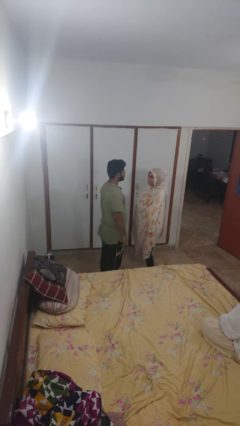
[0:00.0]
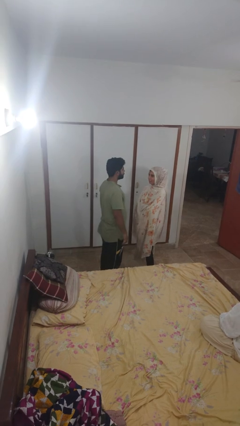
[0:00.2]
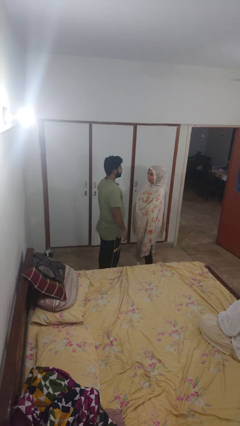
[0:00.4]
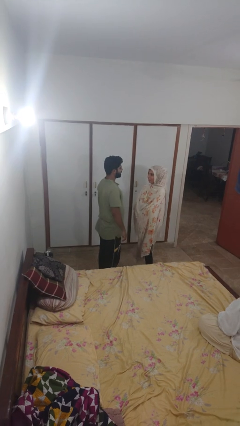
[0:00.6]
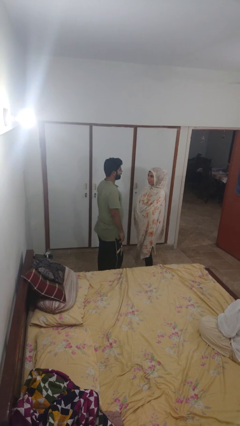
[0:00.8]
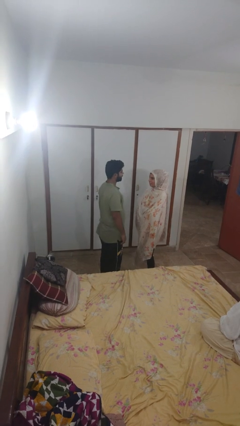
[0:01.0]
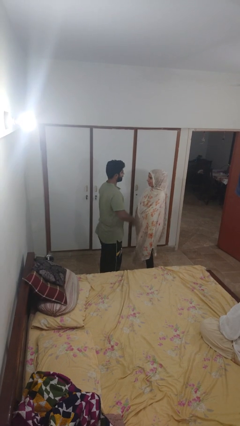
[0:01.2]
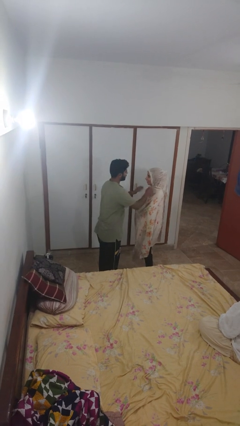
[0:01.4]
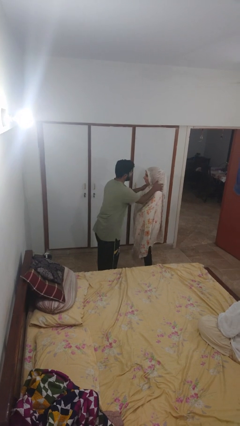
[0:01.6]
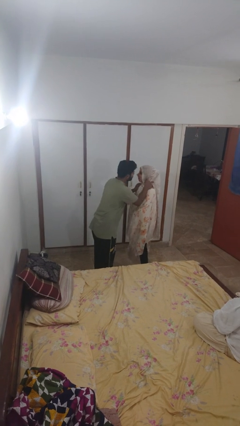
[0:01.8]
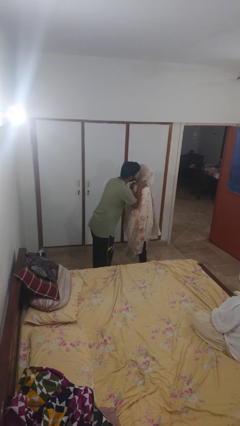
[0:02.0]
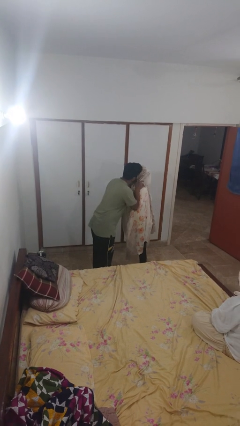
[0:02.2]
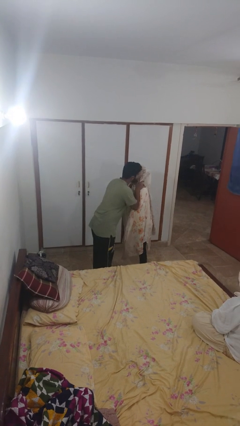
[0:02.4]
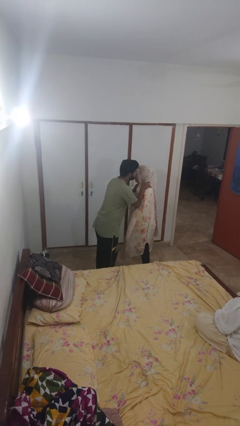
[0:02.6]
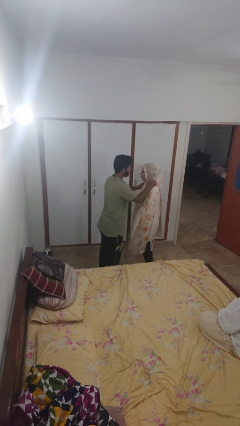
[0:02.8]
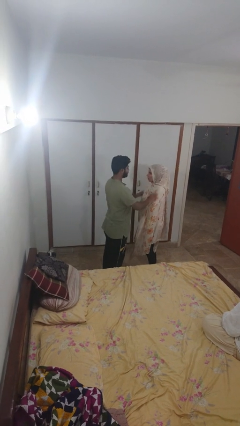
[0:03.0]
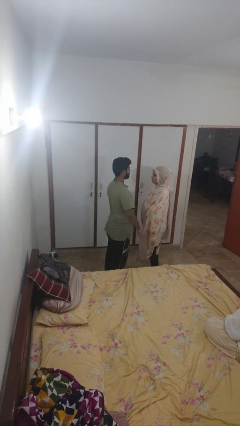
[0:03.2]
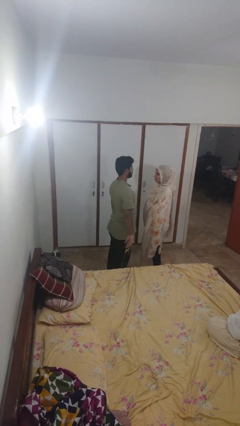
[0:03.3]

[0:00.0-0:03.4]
person kisses cheek of person

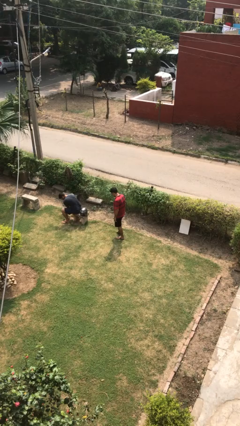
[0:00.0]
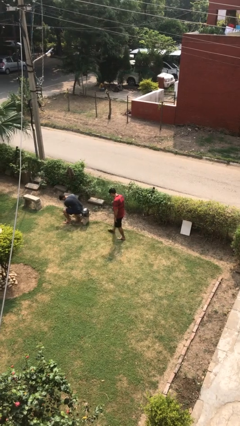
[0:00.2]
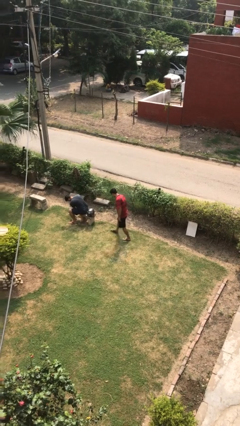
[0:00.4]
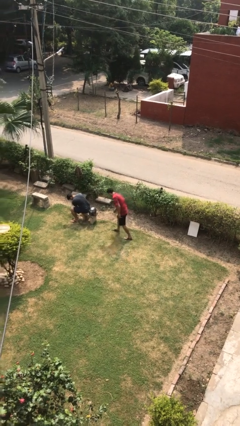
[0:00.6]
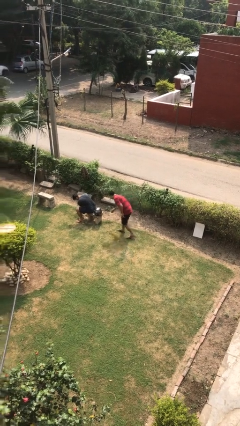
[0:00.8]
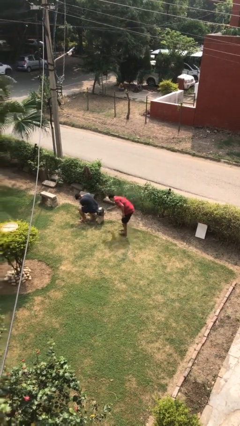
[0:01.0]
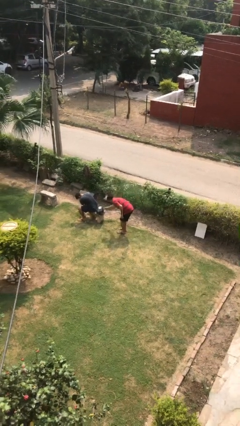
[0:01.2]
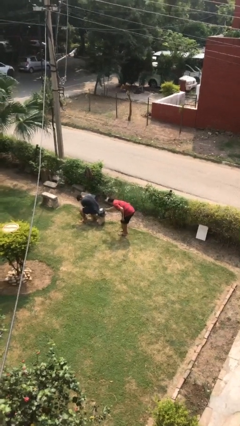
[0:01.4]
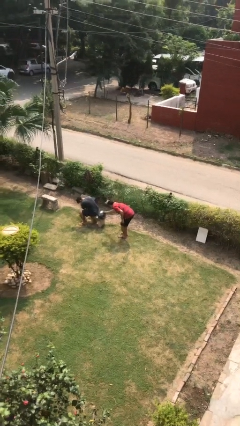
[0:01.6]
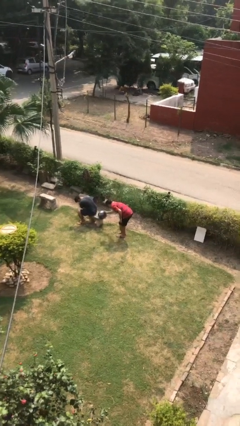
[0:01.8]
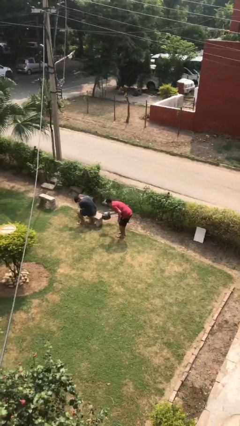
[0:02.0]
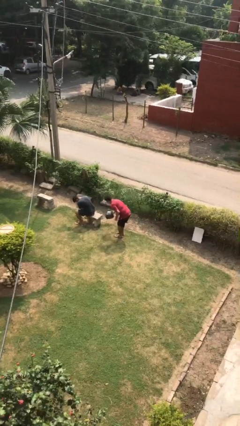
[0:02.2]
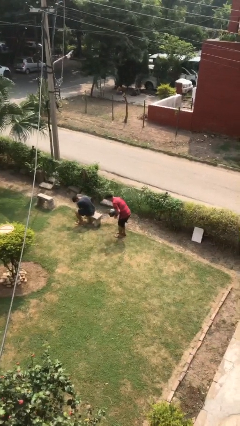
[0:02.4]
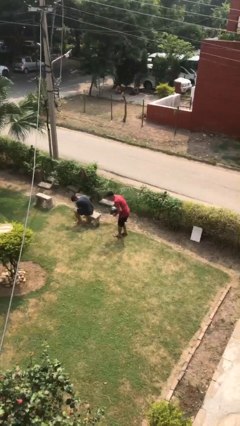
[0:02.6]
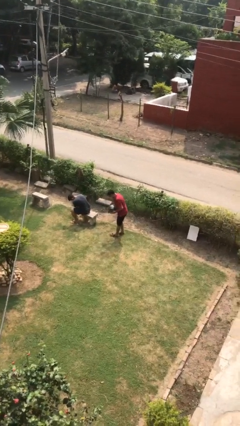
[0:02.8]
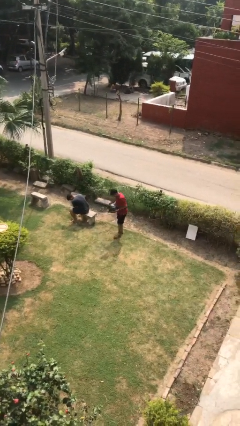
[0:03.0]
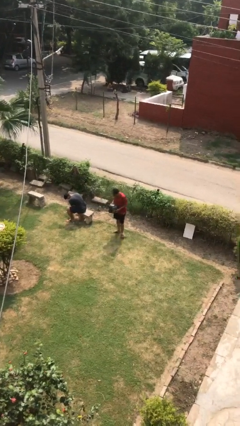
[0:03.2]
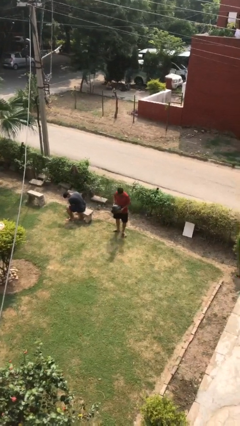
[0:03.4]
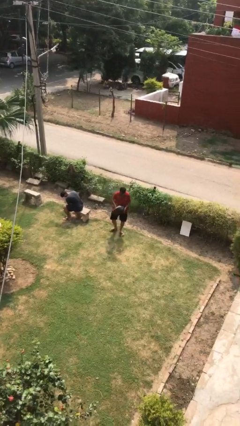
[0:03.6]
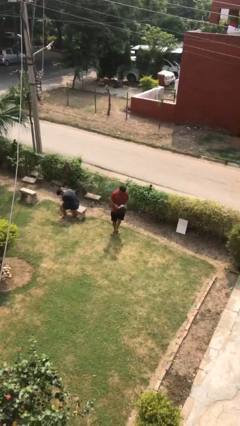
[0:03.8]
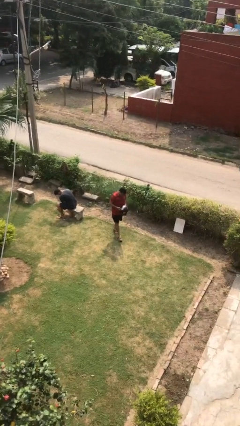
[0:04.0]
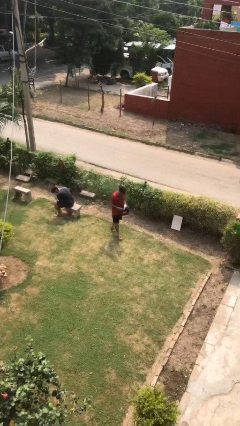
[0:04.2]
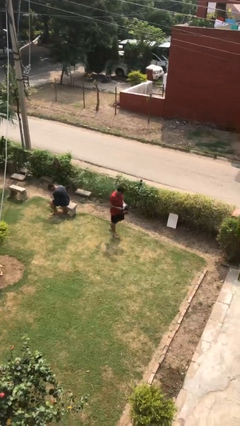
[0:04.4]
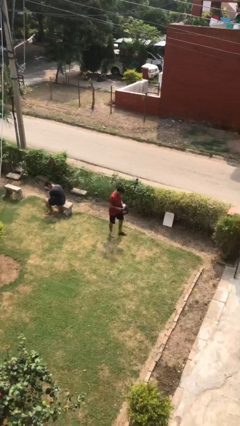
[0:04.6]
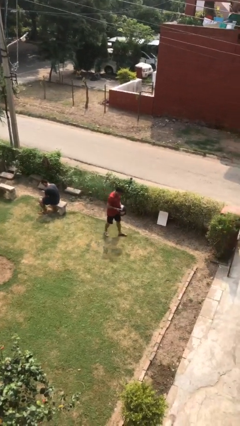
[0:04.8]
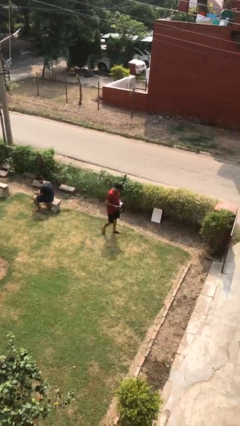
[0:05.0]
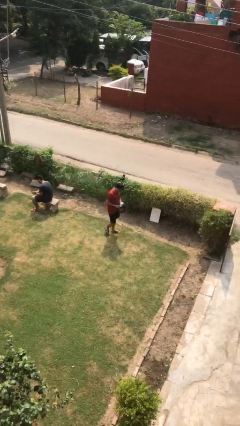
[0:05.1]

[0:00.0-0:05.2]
person steals object from person

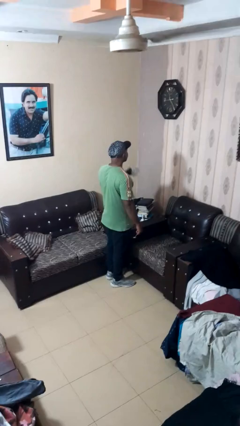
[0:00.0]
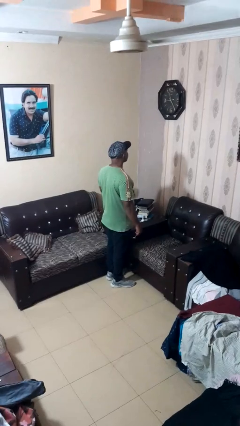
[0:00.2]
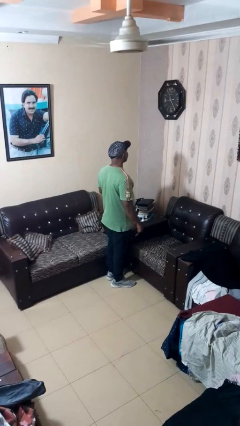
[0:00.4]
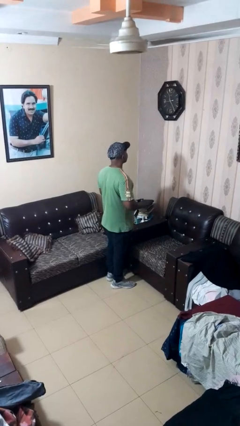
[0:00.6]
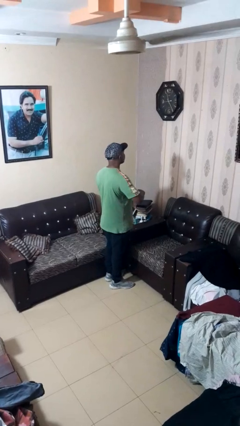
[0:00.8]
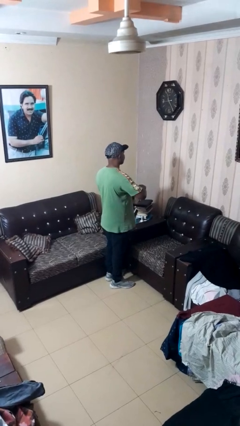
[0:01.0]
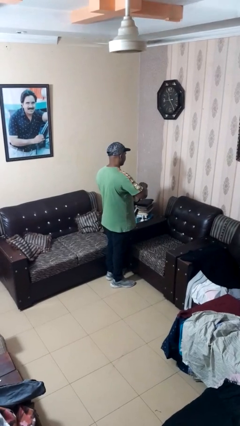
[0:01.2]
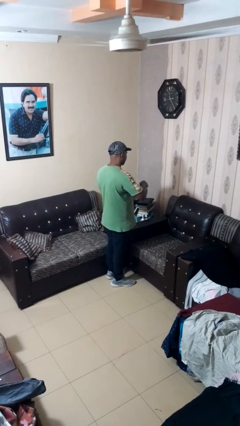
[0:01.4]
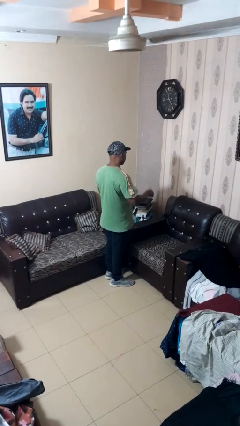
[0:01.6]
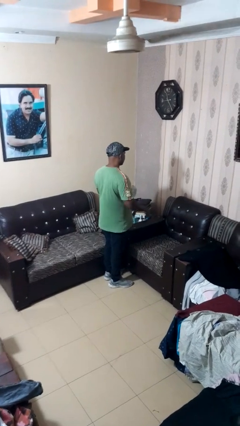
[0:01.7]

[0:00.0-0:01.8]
person stirs mug

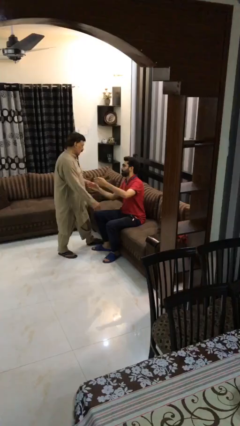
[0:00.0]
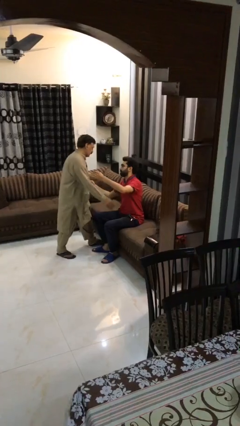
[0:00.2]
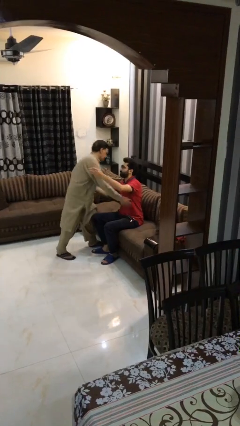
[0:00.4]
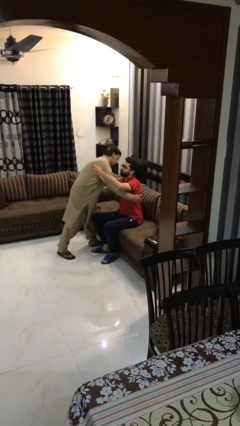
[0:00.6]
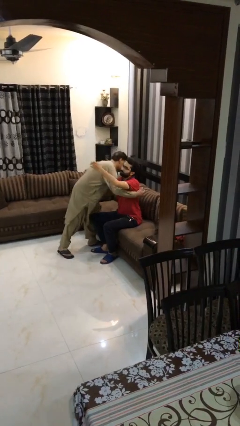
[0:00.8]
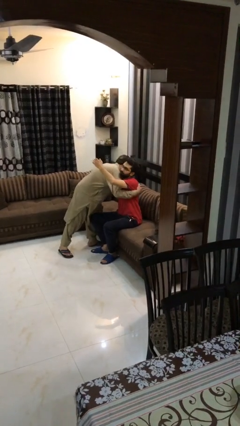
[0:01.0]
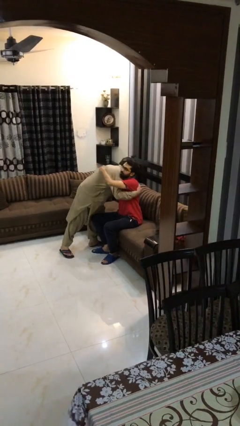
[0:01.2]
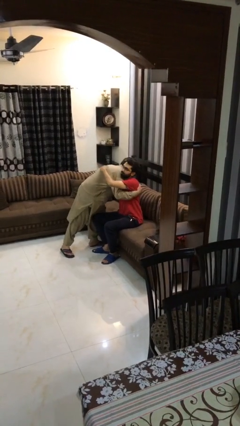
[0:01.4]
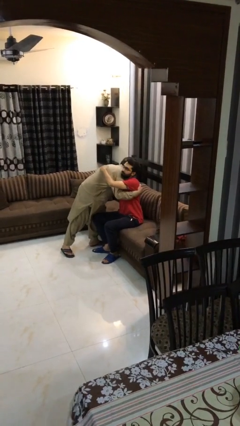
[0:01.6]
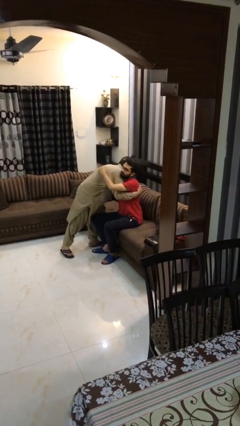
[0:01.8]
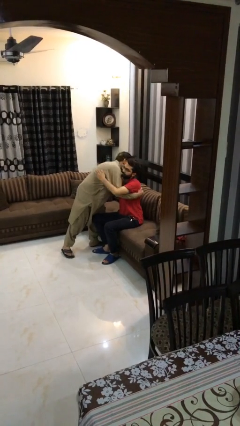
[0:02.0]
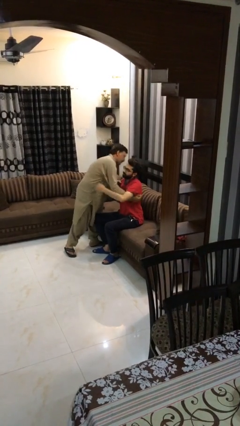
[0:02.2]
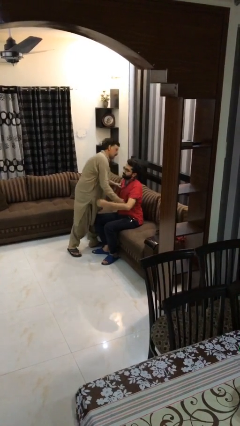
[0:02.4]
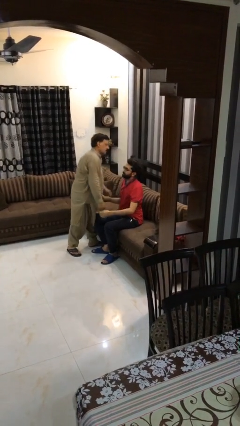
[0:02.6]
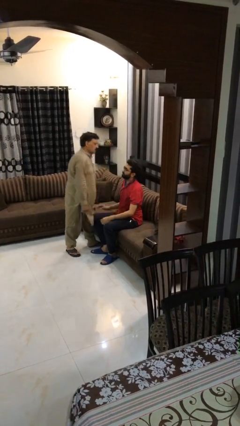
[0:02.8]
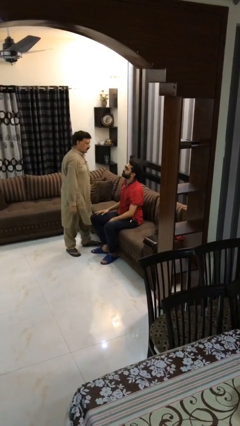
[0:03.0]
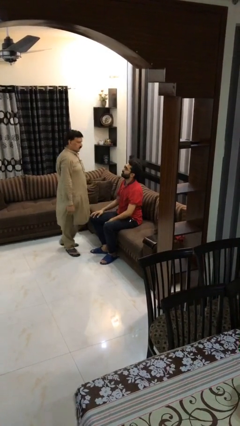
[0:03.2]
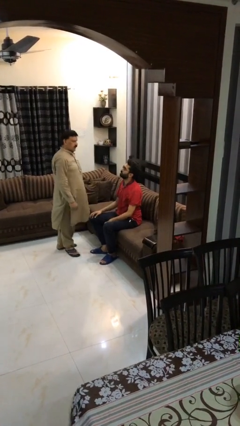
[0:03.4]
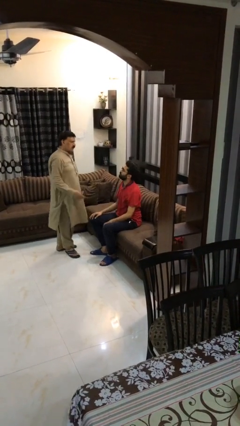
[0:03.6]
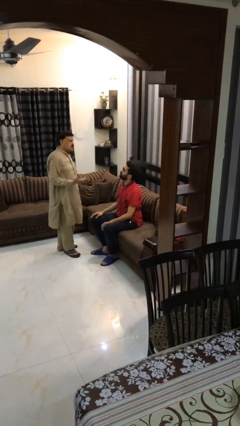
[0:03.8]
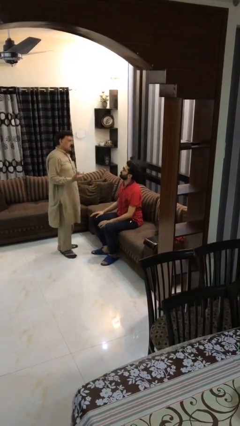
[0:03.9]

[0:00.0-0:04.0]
person embraces person

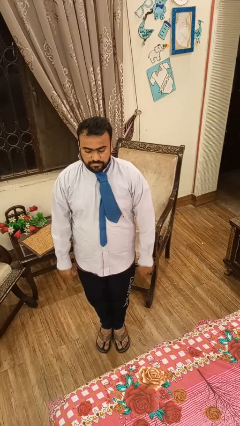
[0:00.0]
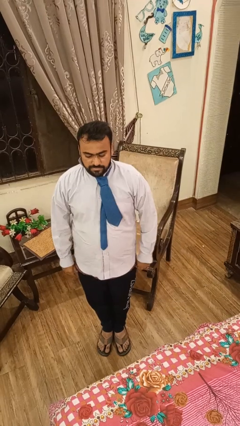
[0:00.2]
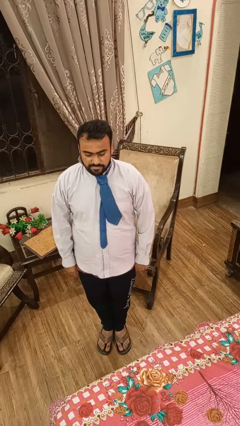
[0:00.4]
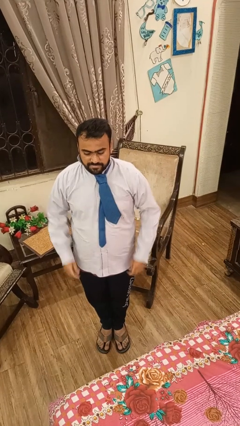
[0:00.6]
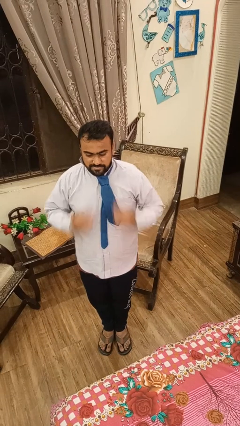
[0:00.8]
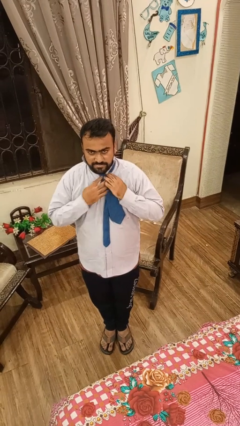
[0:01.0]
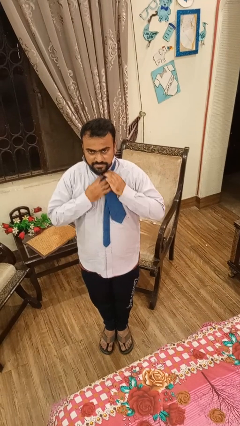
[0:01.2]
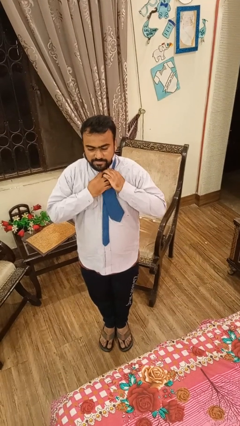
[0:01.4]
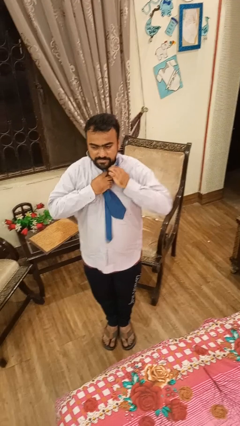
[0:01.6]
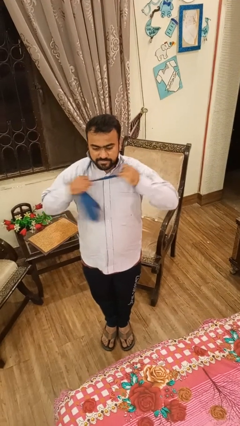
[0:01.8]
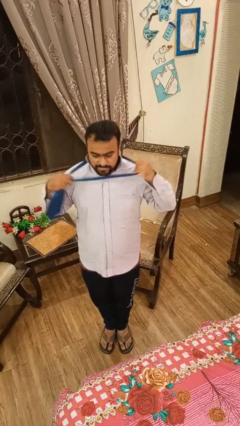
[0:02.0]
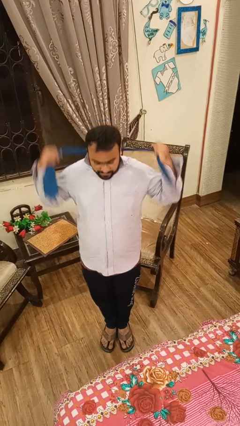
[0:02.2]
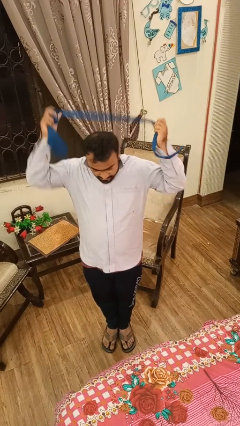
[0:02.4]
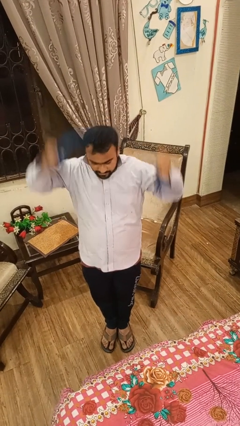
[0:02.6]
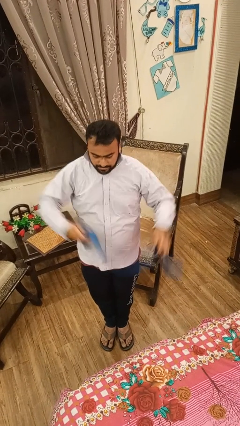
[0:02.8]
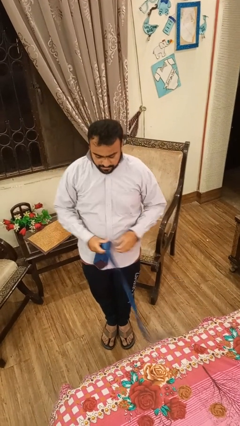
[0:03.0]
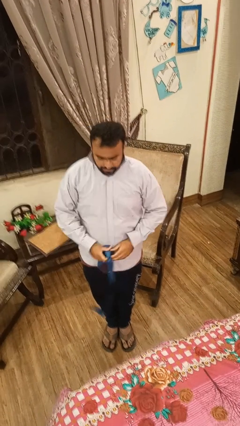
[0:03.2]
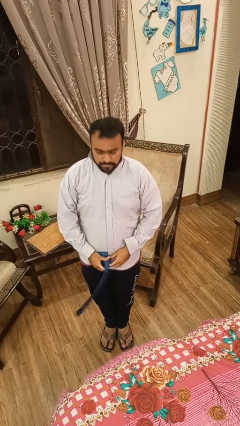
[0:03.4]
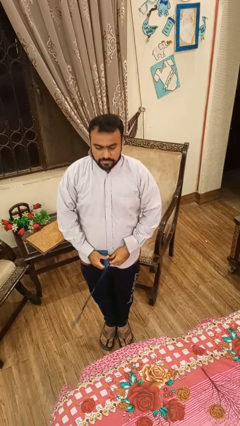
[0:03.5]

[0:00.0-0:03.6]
person takes off necktie
